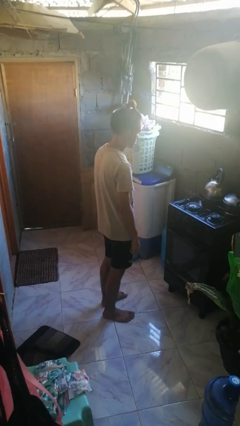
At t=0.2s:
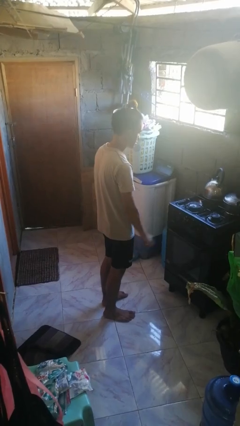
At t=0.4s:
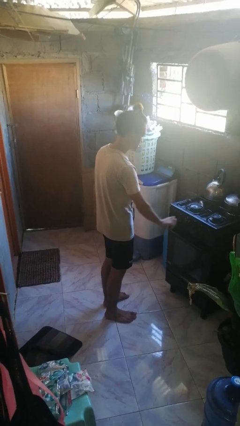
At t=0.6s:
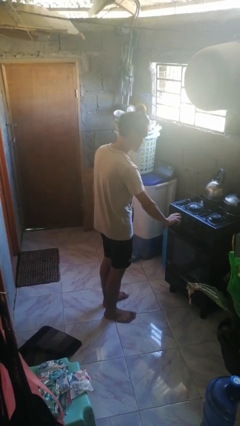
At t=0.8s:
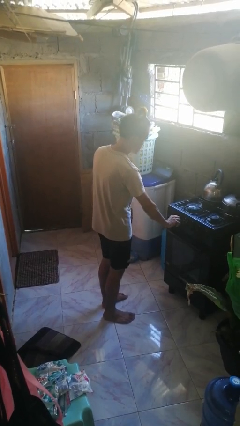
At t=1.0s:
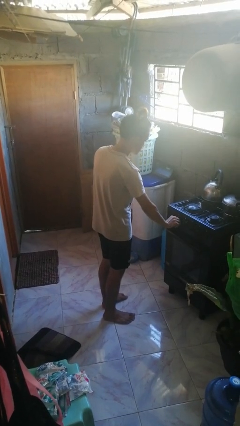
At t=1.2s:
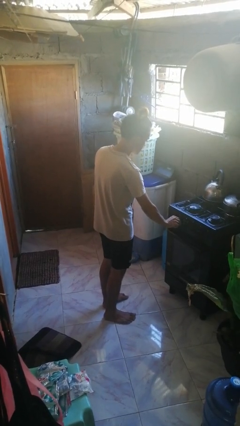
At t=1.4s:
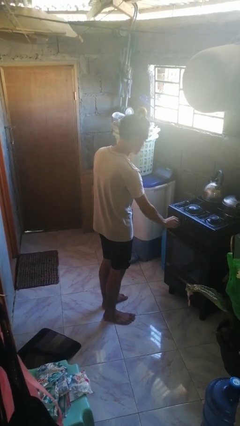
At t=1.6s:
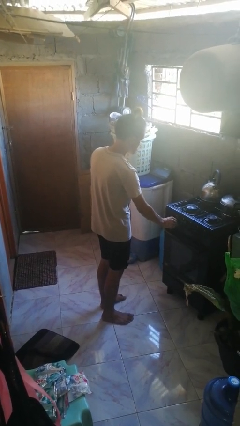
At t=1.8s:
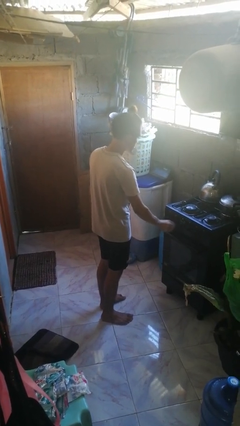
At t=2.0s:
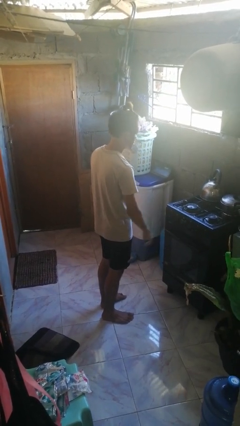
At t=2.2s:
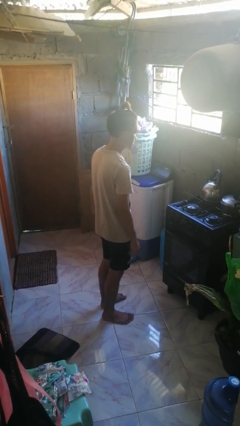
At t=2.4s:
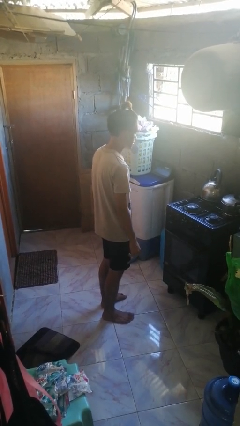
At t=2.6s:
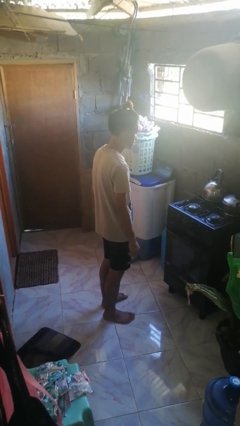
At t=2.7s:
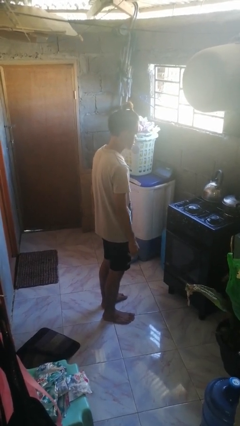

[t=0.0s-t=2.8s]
person turns off stovetop

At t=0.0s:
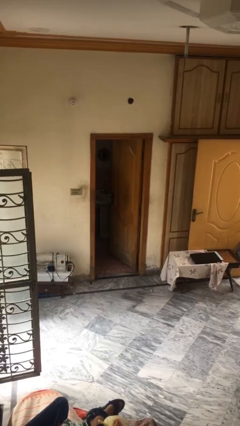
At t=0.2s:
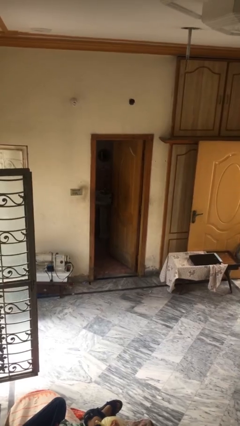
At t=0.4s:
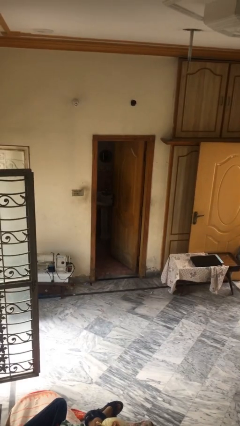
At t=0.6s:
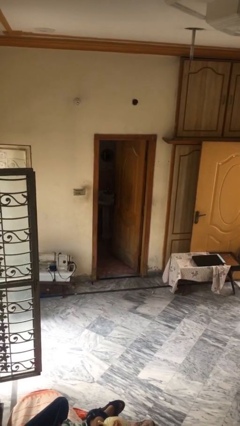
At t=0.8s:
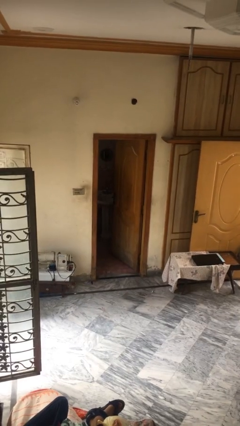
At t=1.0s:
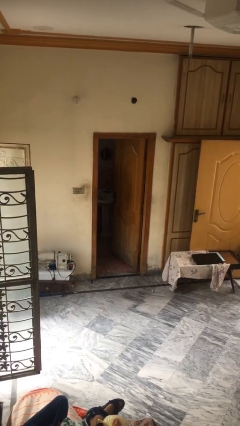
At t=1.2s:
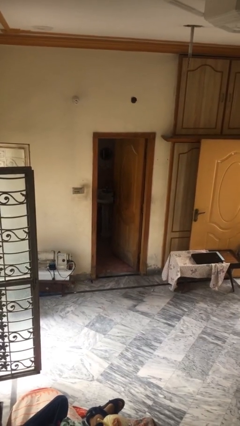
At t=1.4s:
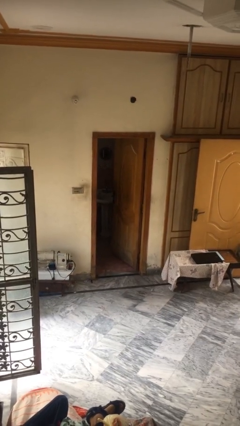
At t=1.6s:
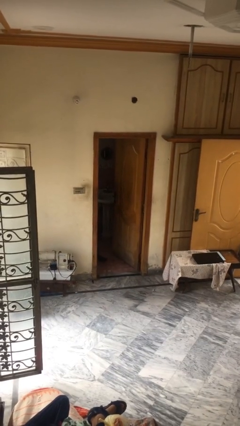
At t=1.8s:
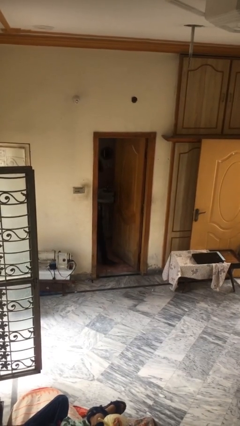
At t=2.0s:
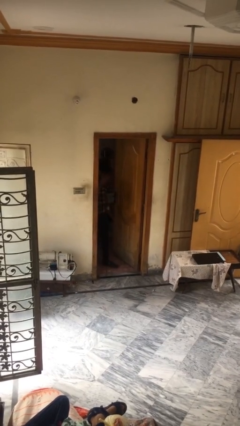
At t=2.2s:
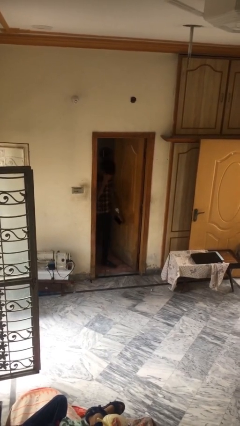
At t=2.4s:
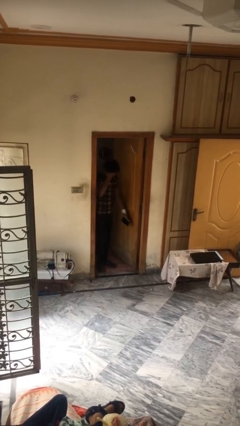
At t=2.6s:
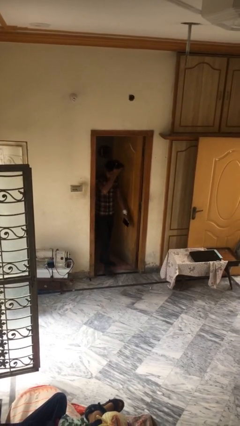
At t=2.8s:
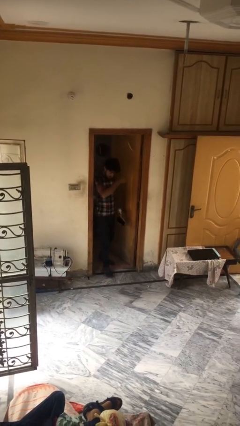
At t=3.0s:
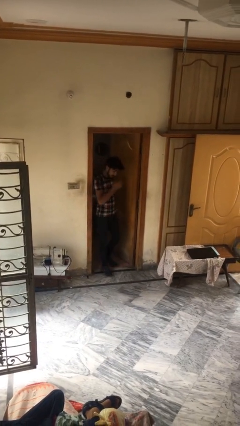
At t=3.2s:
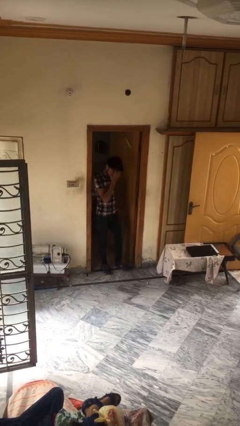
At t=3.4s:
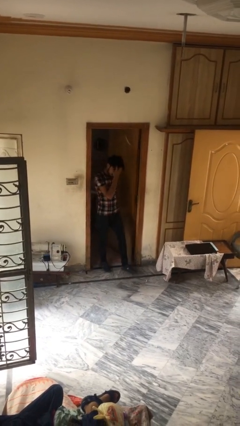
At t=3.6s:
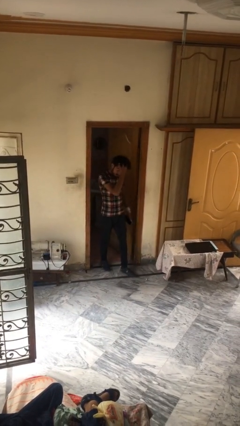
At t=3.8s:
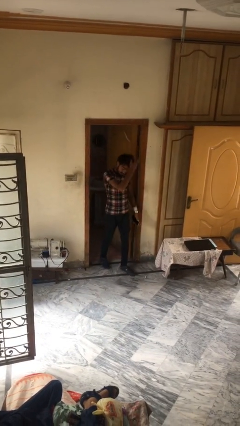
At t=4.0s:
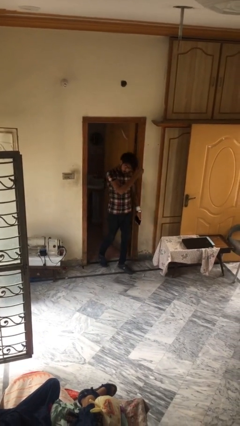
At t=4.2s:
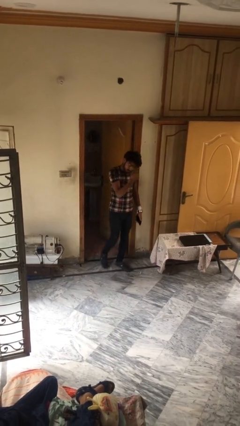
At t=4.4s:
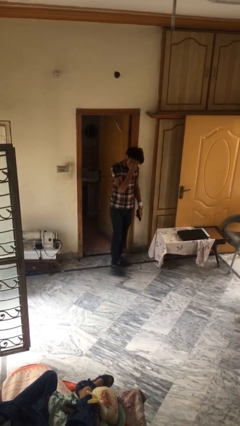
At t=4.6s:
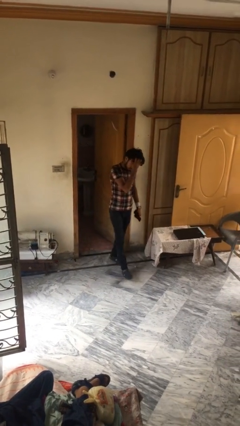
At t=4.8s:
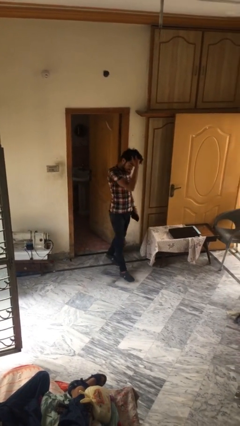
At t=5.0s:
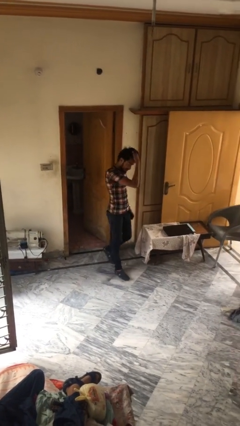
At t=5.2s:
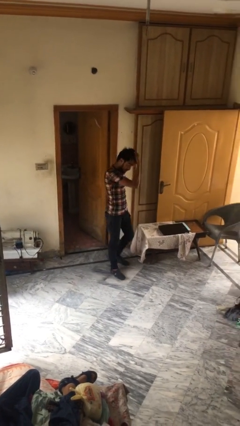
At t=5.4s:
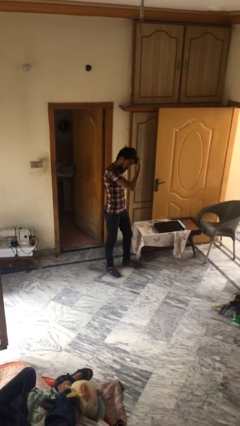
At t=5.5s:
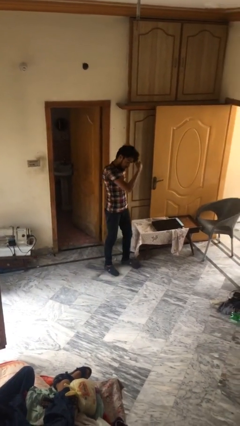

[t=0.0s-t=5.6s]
person enters scene through structure

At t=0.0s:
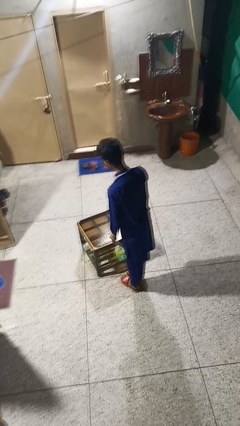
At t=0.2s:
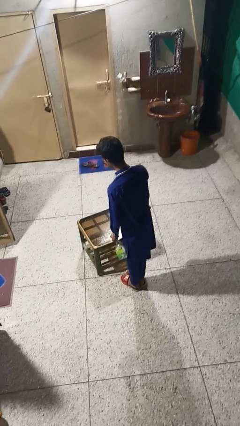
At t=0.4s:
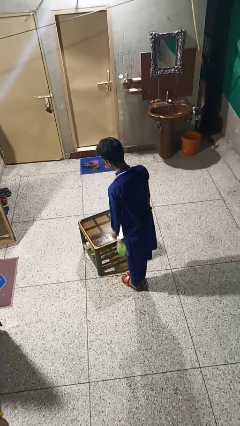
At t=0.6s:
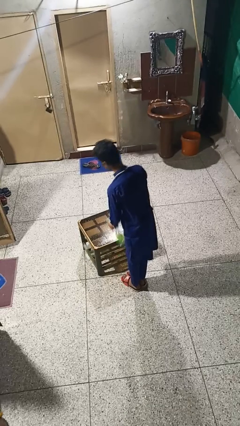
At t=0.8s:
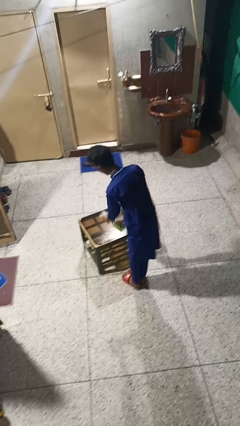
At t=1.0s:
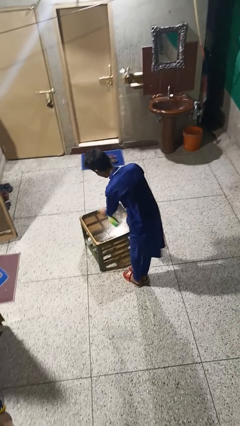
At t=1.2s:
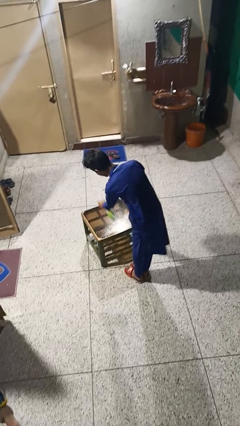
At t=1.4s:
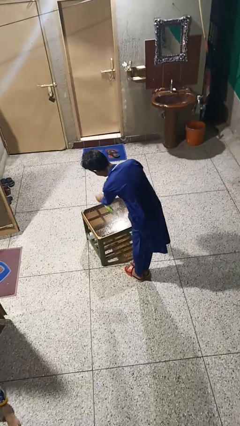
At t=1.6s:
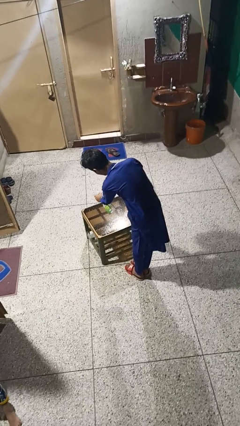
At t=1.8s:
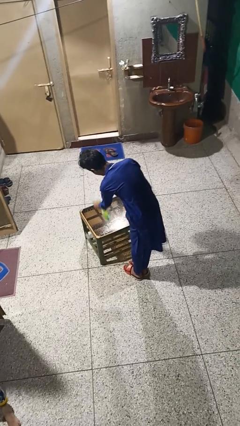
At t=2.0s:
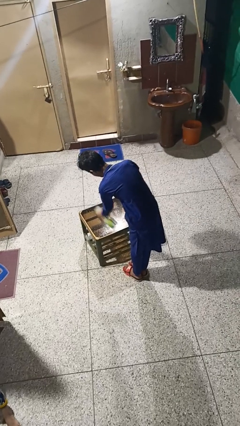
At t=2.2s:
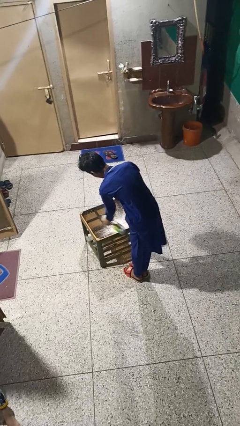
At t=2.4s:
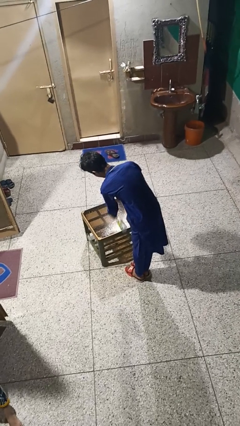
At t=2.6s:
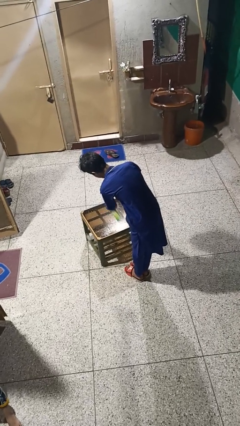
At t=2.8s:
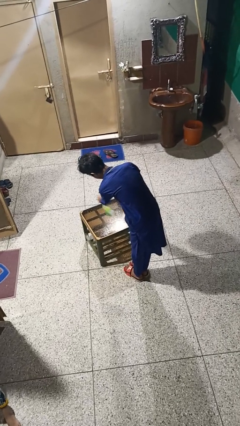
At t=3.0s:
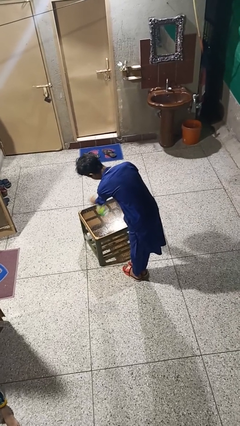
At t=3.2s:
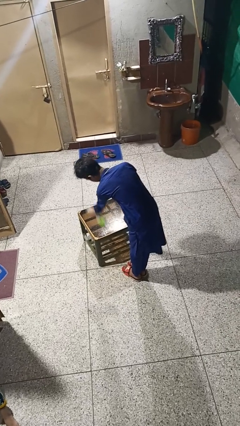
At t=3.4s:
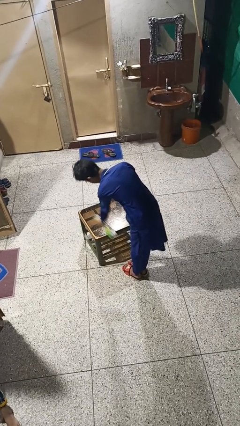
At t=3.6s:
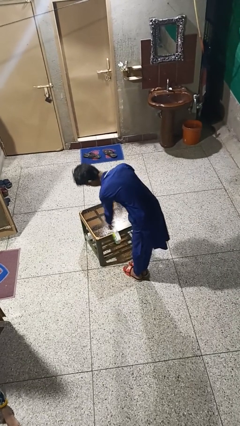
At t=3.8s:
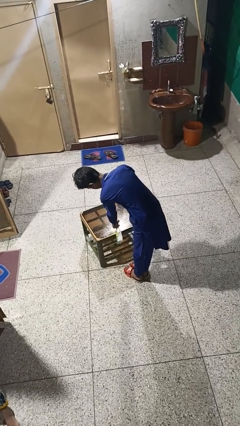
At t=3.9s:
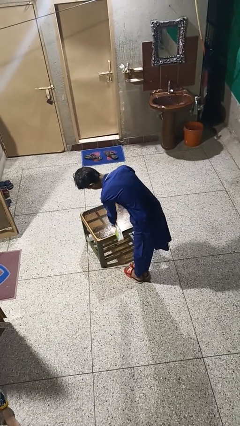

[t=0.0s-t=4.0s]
person sprays from bottle

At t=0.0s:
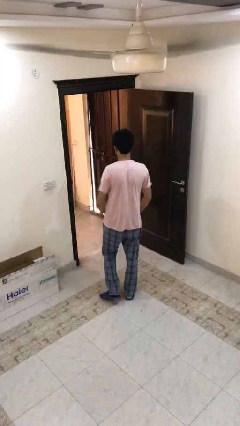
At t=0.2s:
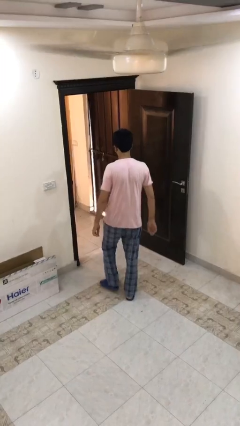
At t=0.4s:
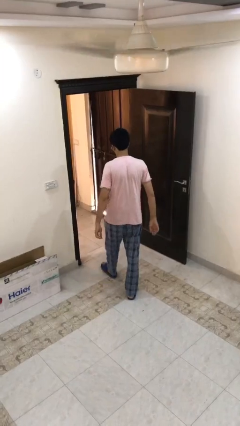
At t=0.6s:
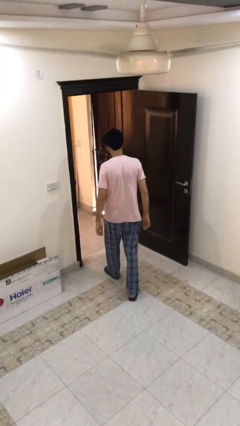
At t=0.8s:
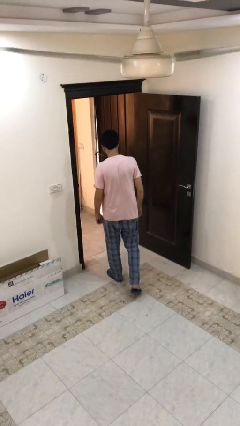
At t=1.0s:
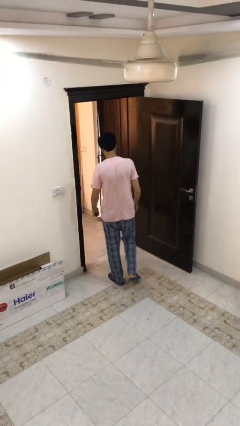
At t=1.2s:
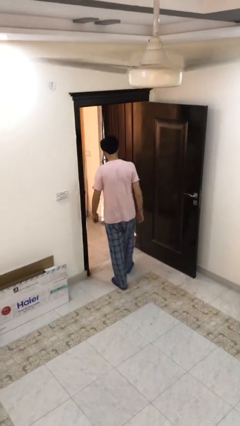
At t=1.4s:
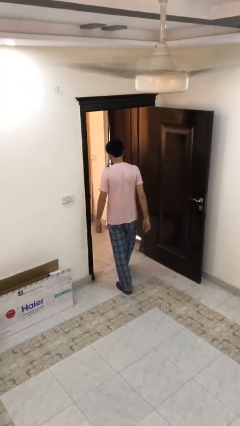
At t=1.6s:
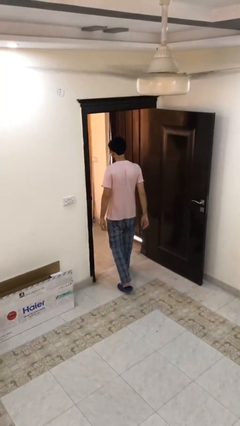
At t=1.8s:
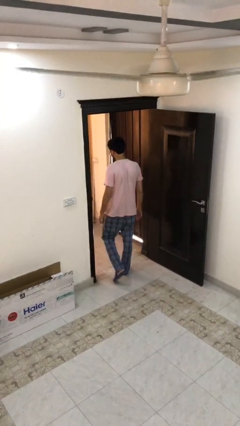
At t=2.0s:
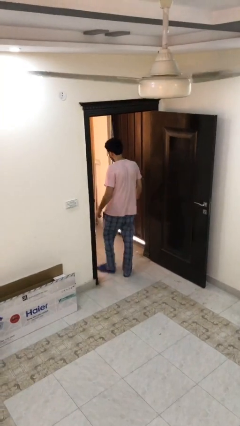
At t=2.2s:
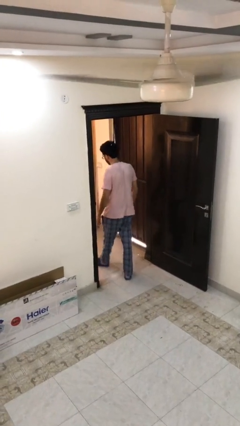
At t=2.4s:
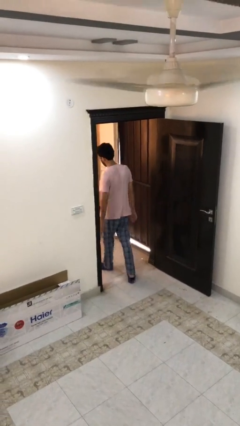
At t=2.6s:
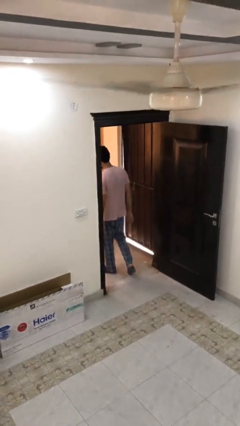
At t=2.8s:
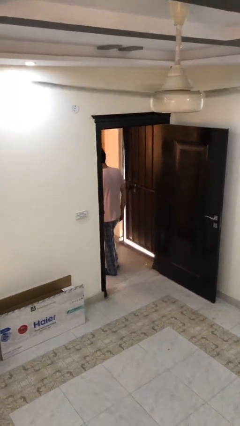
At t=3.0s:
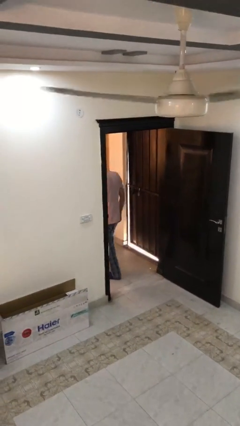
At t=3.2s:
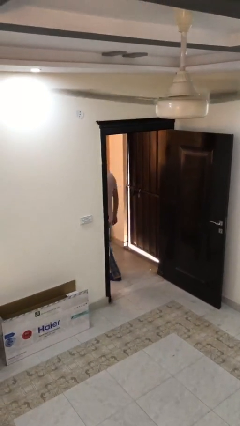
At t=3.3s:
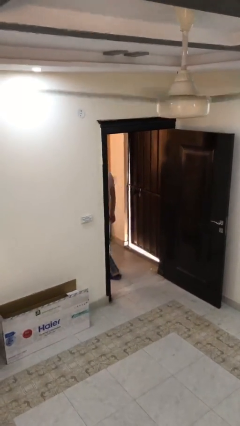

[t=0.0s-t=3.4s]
person exits scene through structure

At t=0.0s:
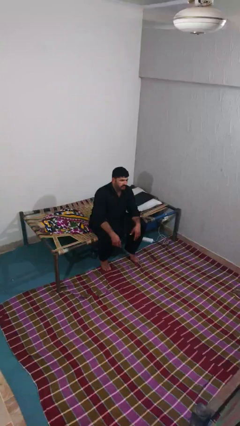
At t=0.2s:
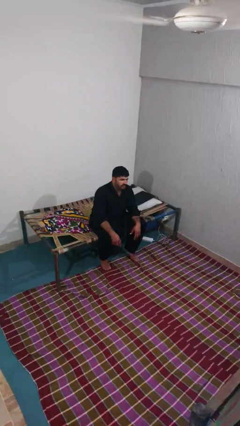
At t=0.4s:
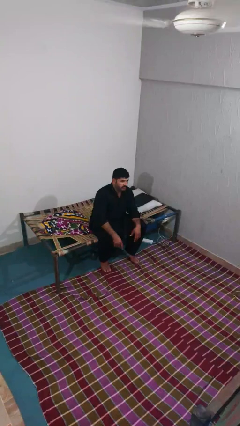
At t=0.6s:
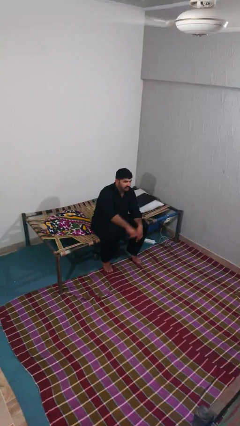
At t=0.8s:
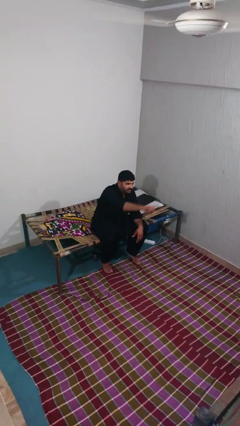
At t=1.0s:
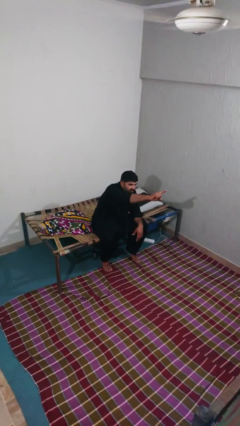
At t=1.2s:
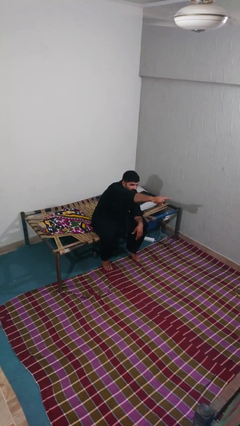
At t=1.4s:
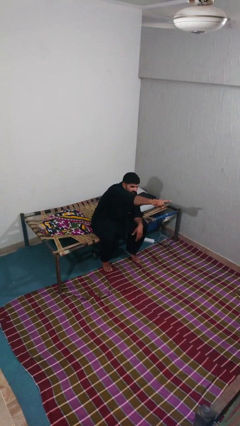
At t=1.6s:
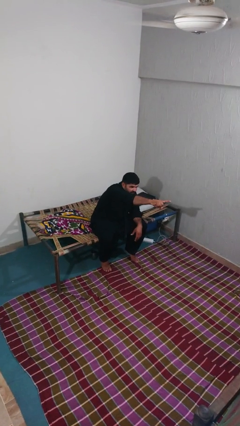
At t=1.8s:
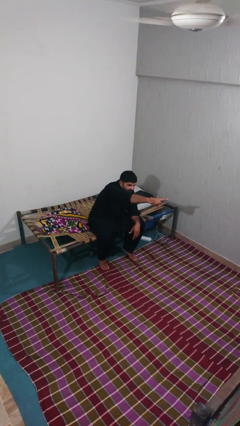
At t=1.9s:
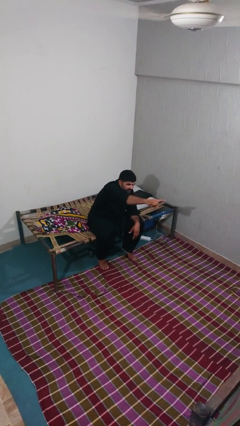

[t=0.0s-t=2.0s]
person points at person
